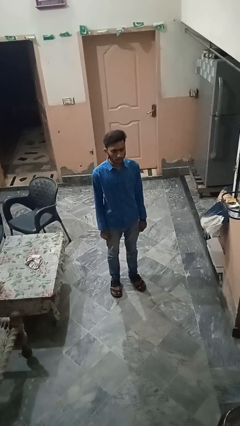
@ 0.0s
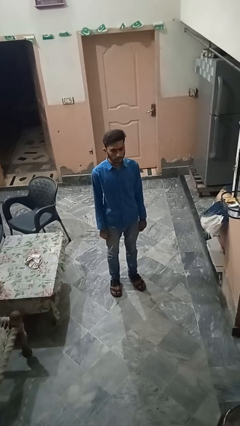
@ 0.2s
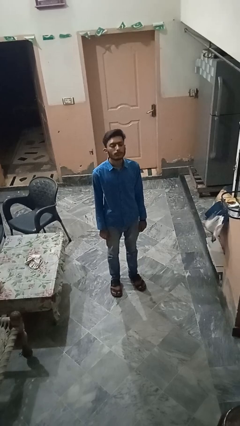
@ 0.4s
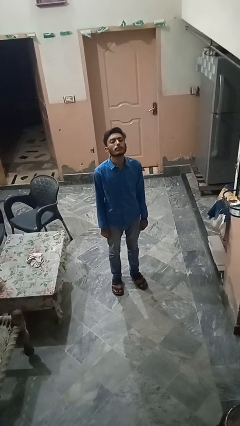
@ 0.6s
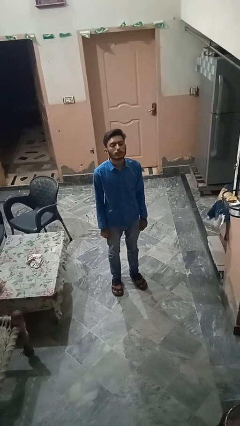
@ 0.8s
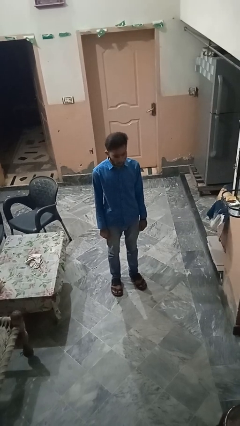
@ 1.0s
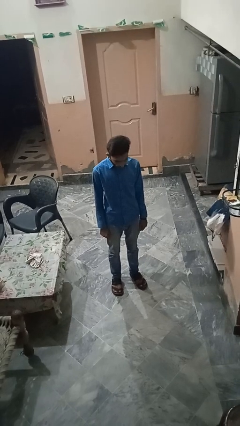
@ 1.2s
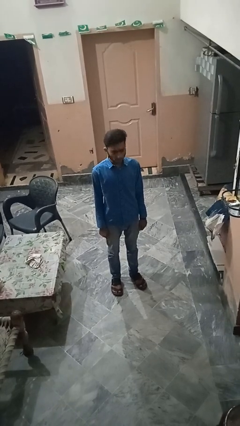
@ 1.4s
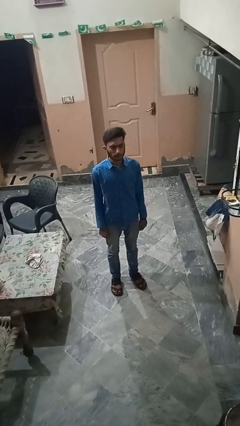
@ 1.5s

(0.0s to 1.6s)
person nods head

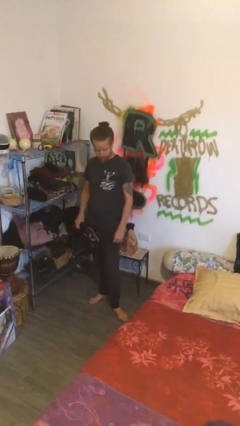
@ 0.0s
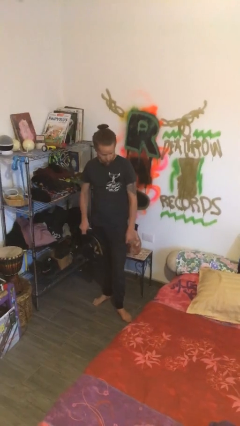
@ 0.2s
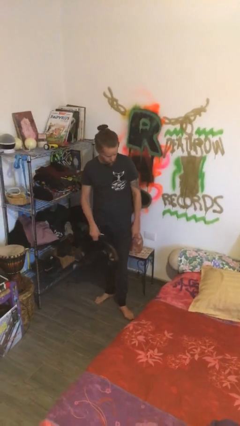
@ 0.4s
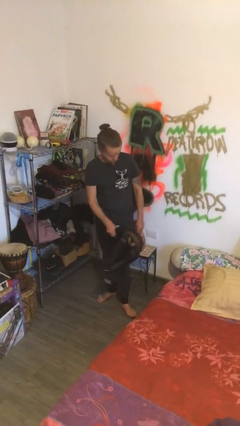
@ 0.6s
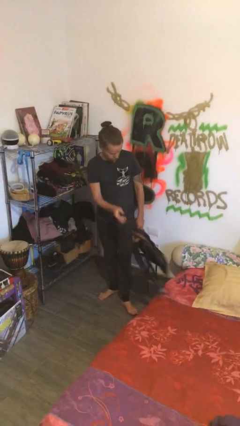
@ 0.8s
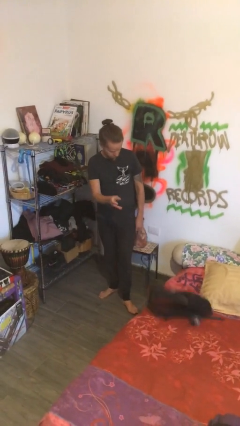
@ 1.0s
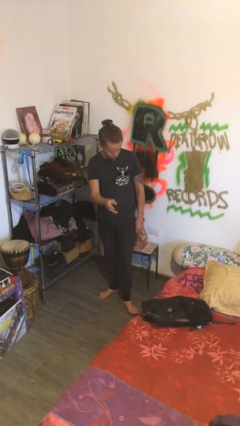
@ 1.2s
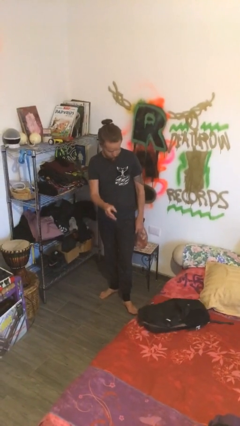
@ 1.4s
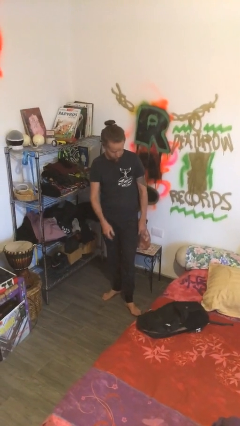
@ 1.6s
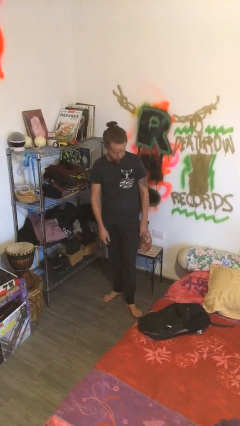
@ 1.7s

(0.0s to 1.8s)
person puts down object on bed

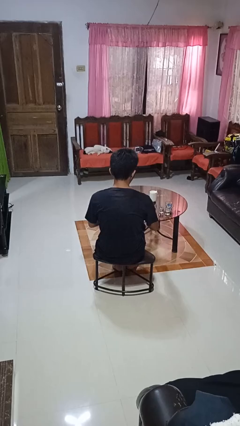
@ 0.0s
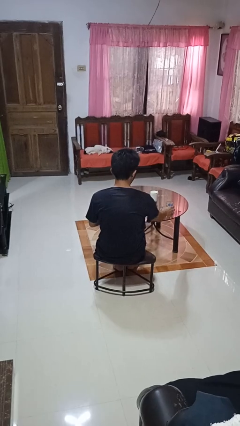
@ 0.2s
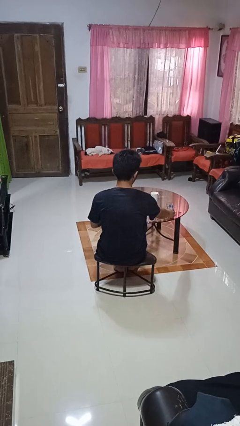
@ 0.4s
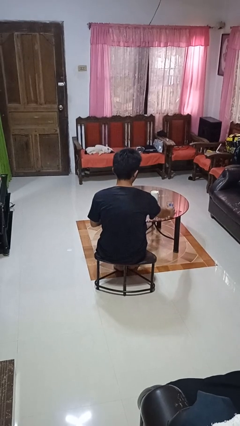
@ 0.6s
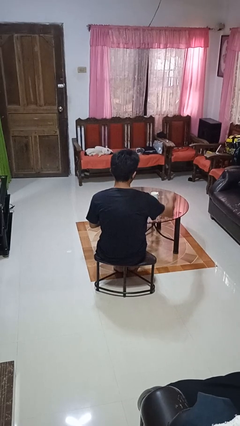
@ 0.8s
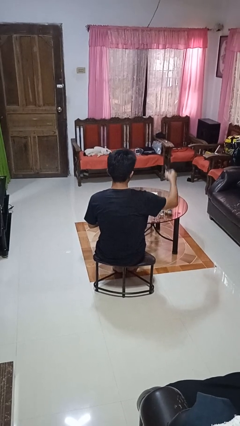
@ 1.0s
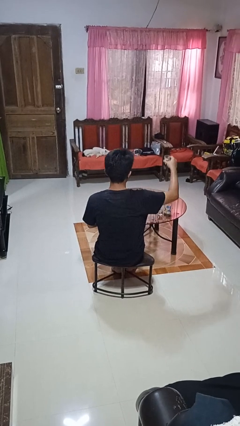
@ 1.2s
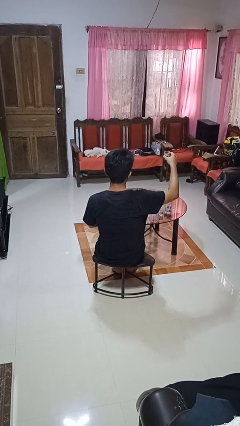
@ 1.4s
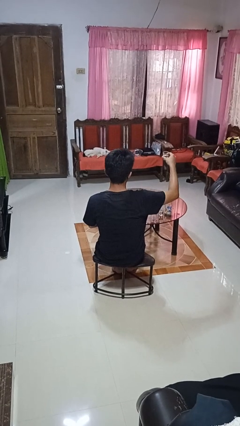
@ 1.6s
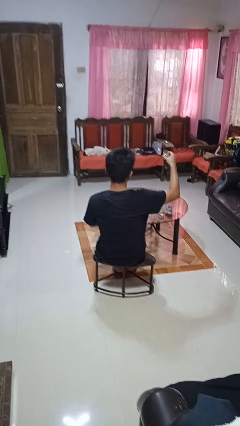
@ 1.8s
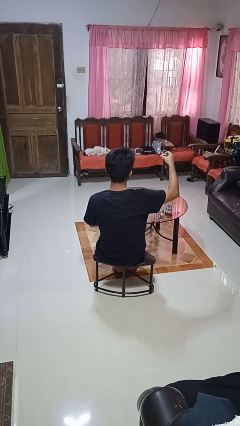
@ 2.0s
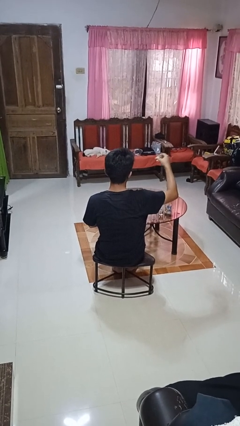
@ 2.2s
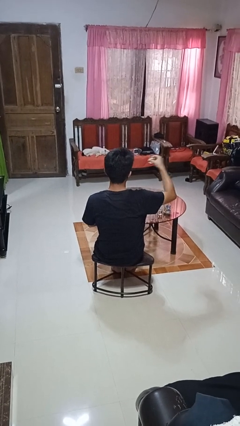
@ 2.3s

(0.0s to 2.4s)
person picks up object from table

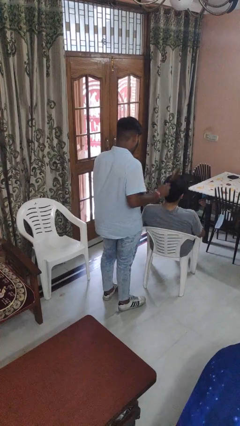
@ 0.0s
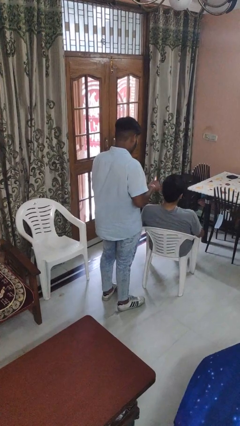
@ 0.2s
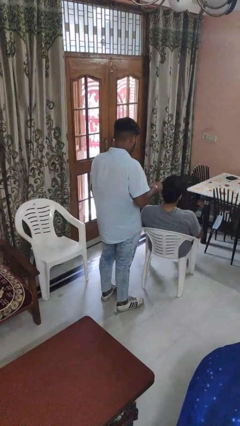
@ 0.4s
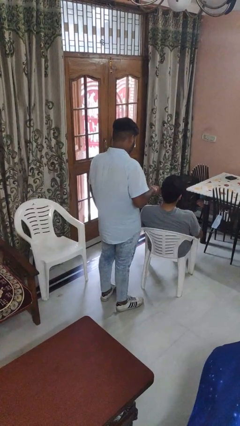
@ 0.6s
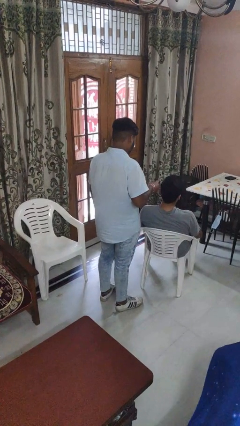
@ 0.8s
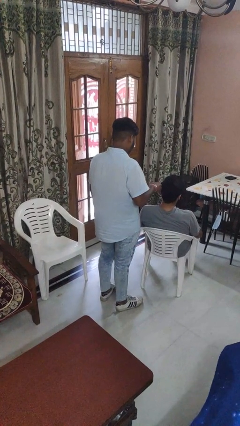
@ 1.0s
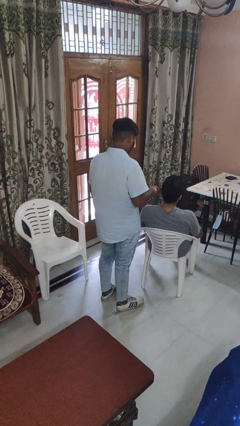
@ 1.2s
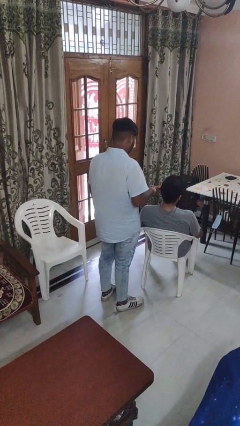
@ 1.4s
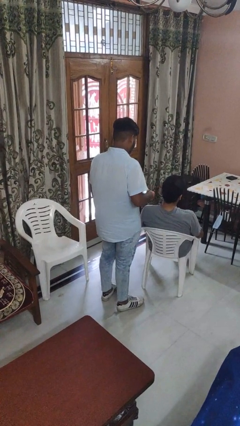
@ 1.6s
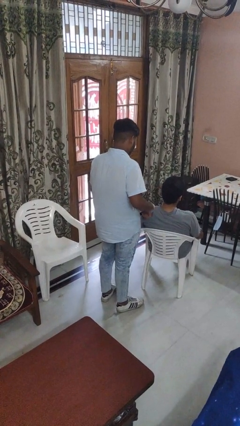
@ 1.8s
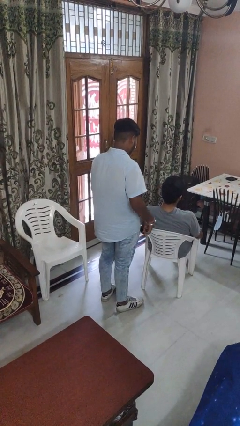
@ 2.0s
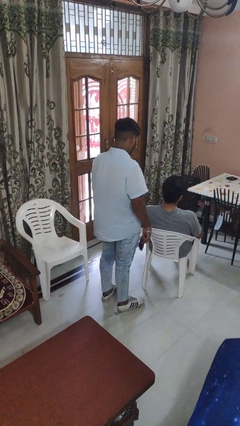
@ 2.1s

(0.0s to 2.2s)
person brushes hair of person

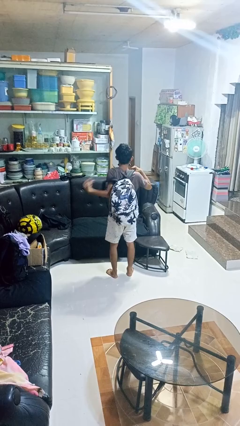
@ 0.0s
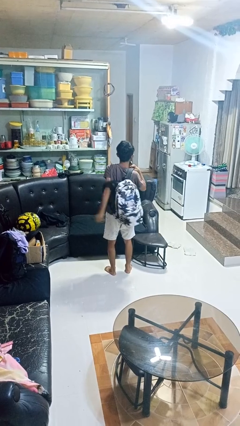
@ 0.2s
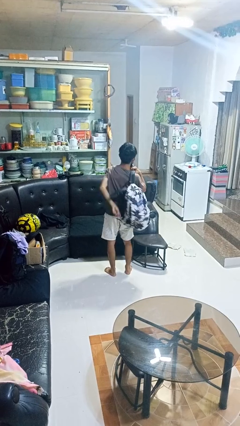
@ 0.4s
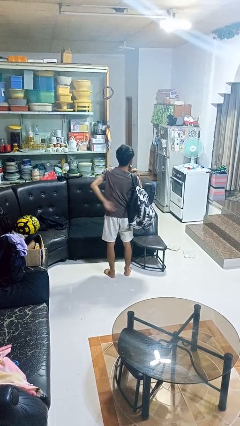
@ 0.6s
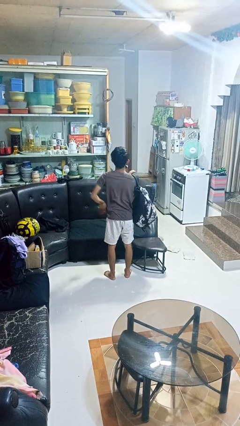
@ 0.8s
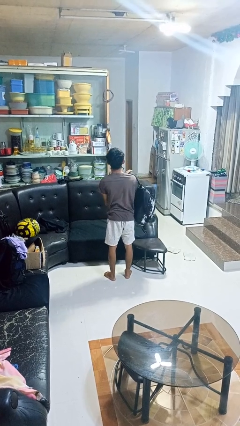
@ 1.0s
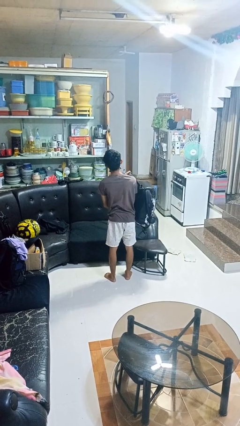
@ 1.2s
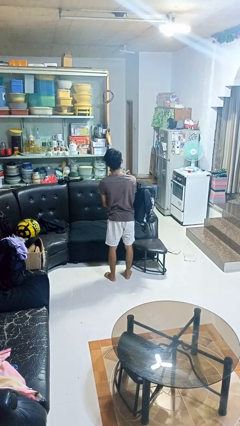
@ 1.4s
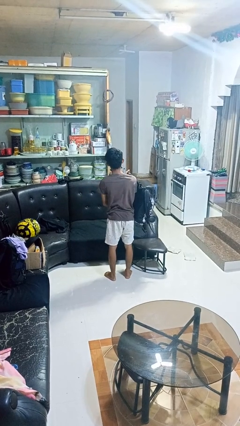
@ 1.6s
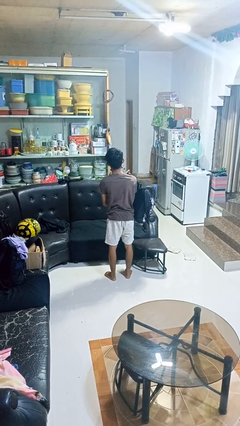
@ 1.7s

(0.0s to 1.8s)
person takes off backpack

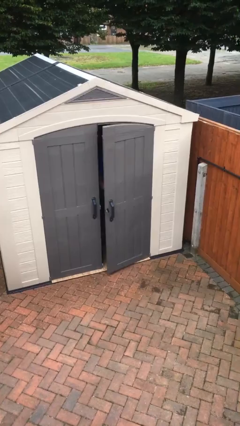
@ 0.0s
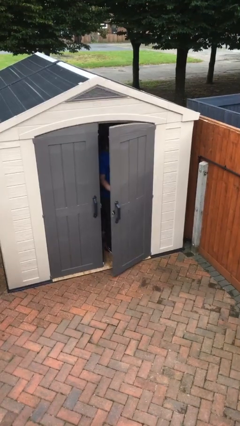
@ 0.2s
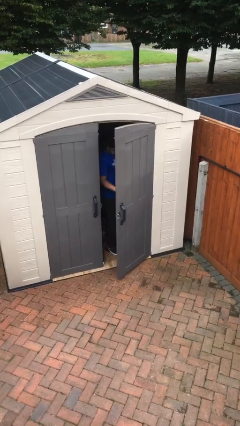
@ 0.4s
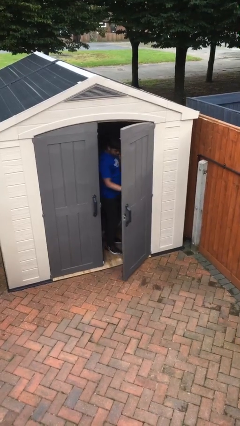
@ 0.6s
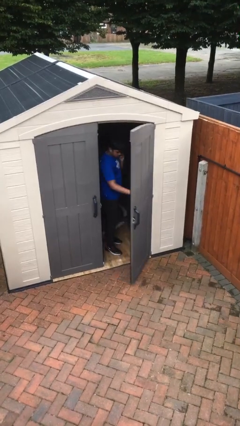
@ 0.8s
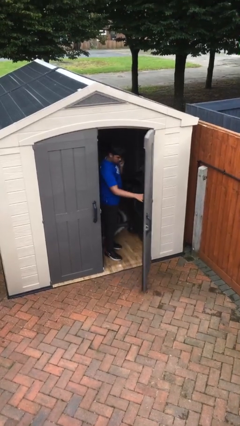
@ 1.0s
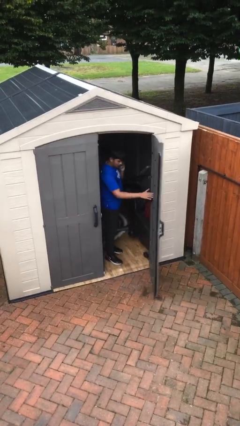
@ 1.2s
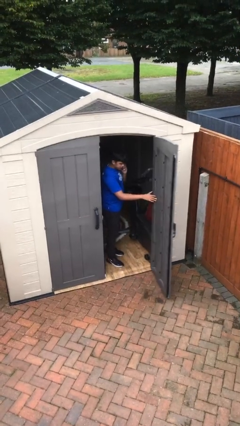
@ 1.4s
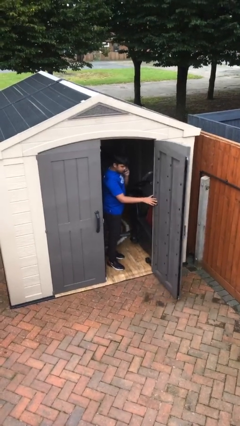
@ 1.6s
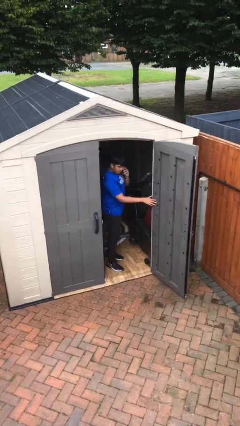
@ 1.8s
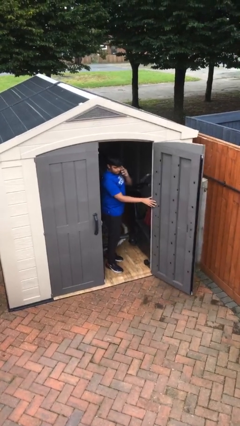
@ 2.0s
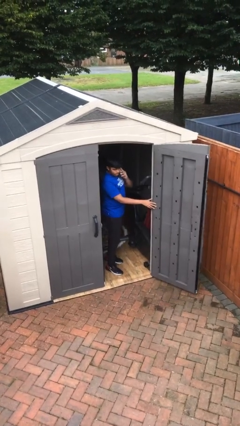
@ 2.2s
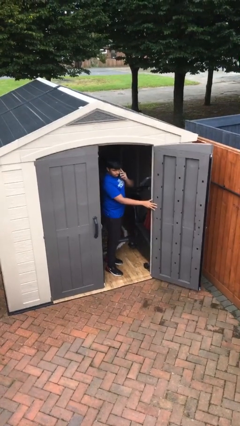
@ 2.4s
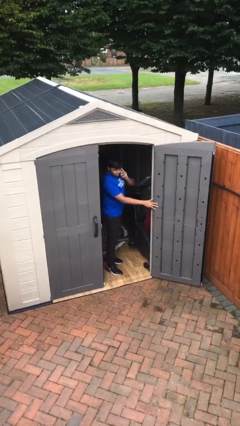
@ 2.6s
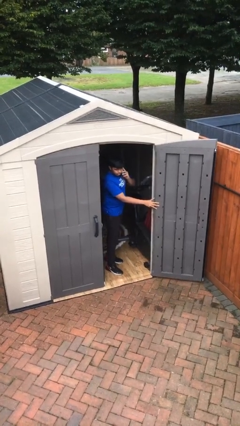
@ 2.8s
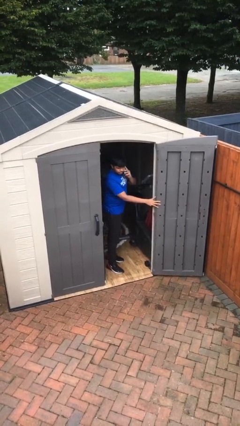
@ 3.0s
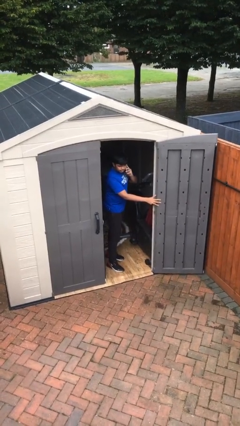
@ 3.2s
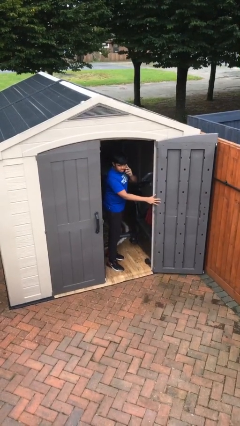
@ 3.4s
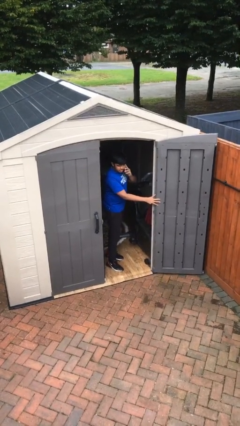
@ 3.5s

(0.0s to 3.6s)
person opens facility door

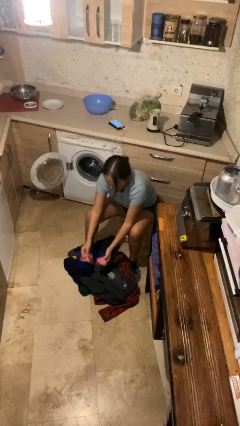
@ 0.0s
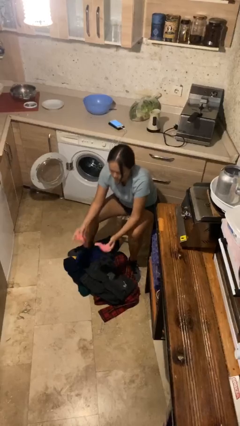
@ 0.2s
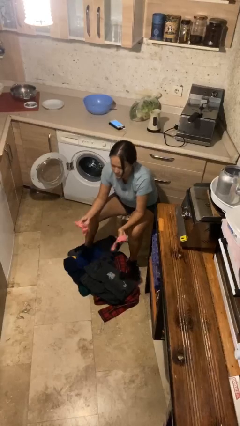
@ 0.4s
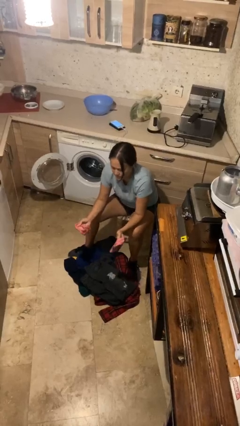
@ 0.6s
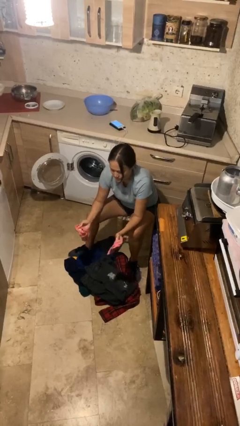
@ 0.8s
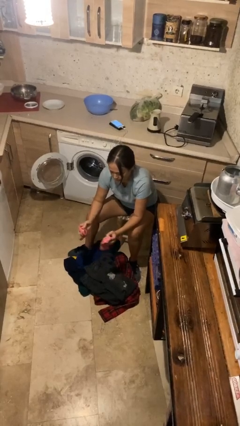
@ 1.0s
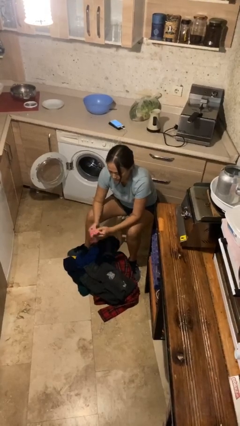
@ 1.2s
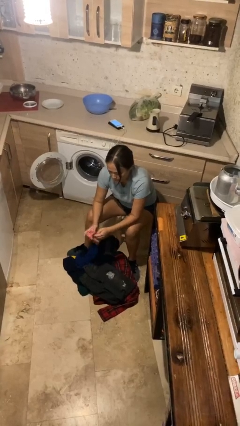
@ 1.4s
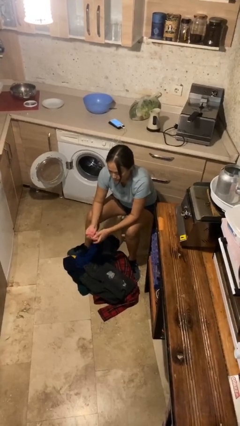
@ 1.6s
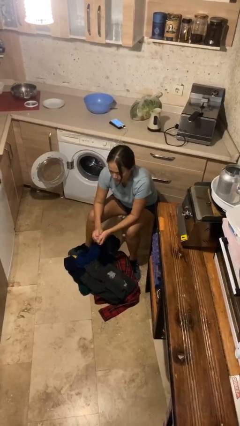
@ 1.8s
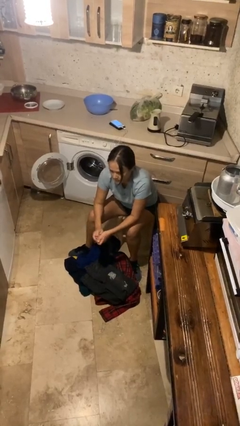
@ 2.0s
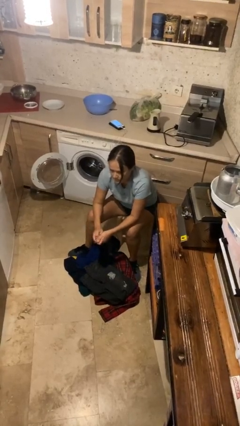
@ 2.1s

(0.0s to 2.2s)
person folds socks

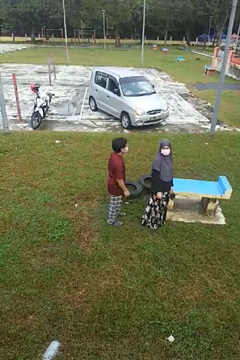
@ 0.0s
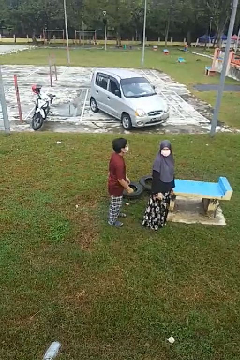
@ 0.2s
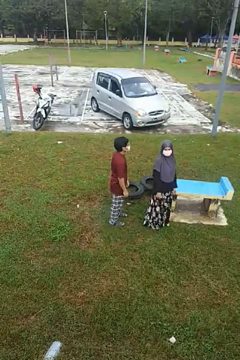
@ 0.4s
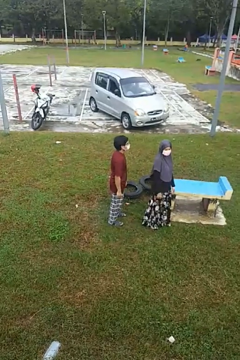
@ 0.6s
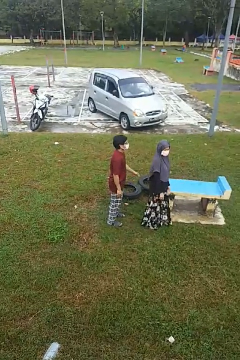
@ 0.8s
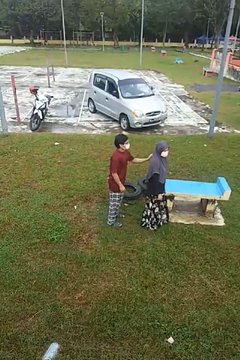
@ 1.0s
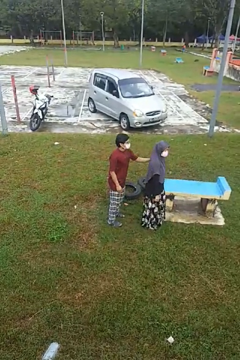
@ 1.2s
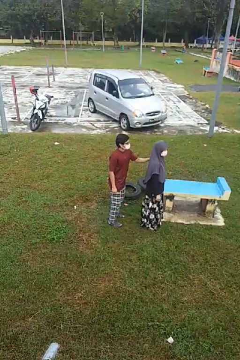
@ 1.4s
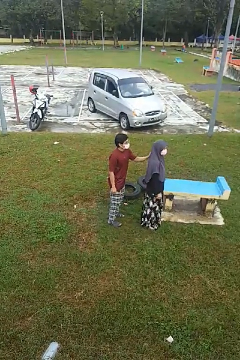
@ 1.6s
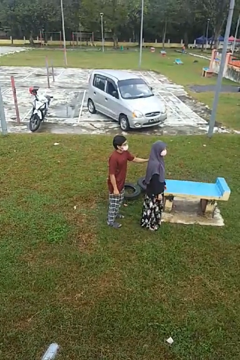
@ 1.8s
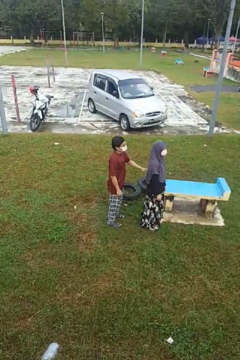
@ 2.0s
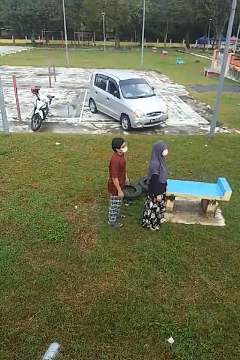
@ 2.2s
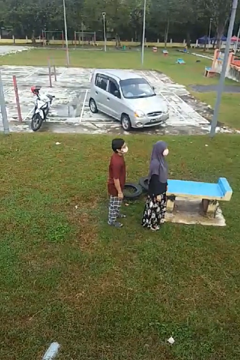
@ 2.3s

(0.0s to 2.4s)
person touches back of person
